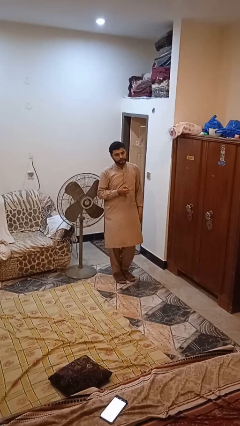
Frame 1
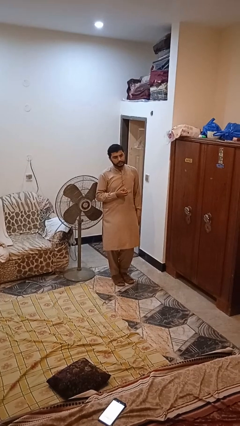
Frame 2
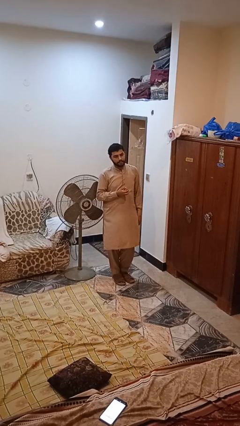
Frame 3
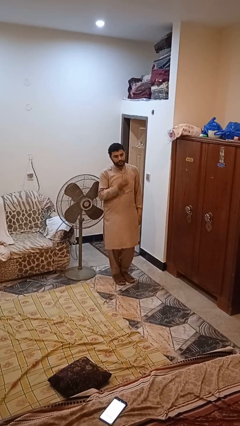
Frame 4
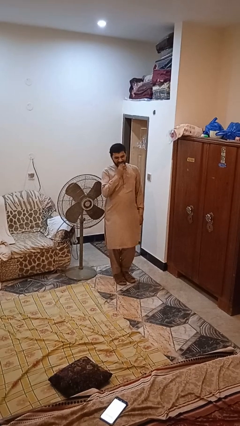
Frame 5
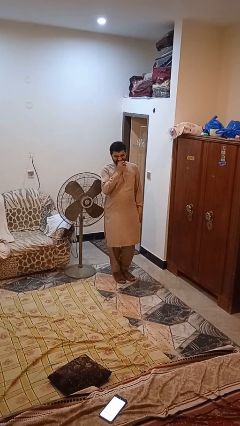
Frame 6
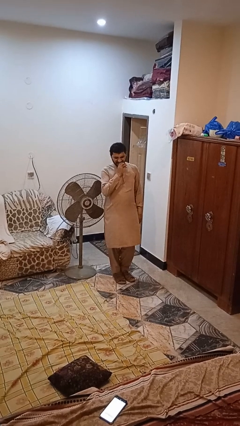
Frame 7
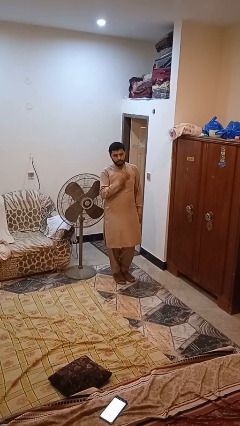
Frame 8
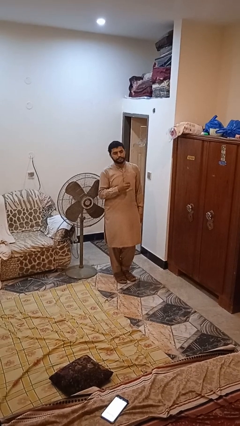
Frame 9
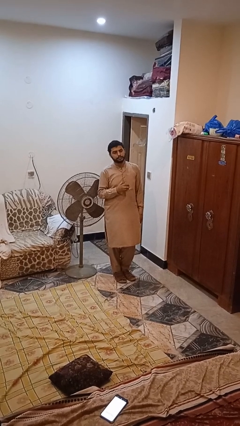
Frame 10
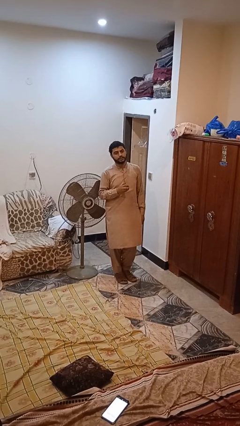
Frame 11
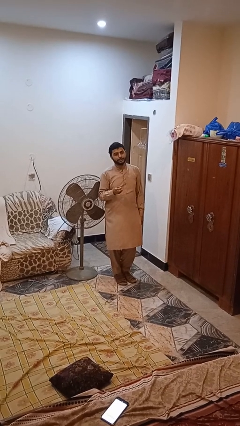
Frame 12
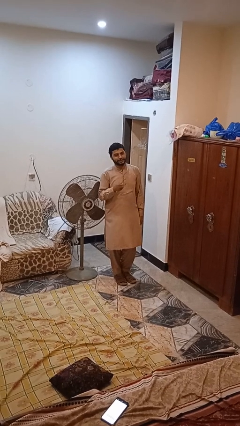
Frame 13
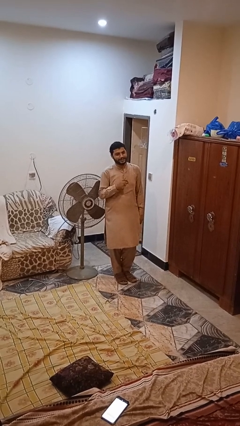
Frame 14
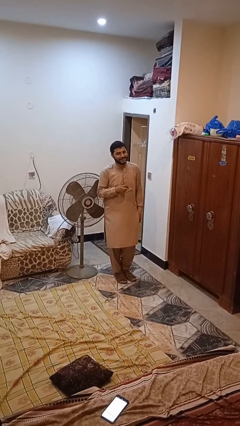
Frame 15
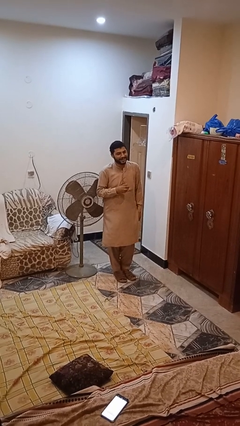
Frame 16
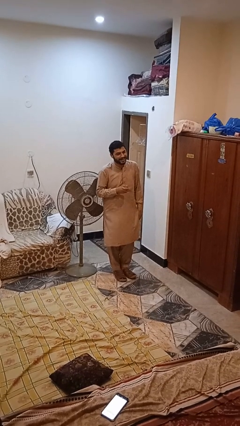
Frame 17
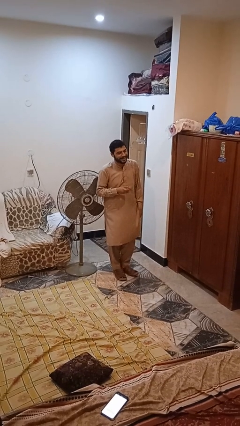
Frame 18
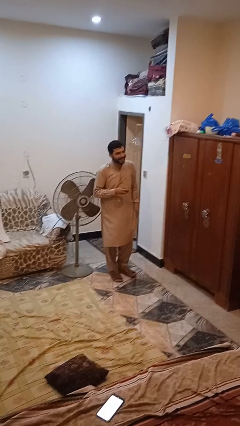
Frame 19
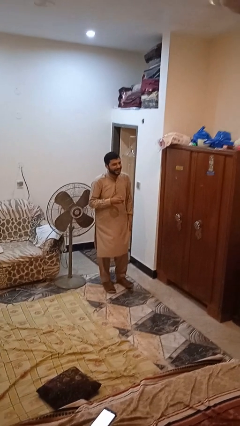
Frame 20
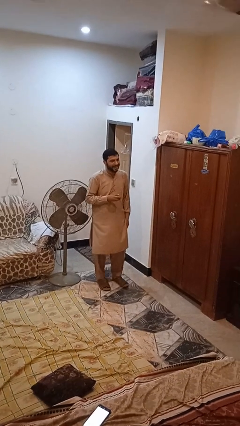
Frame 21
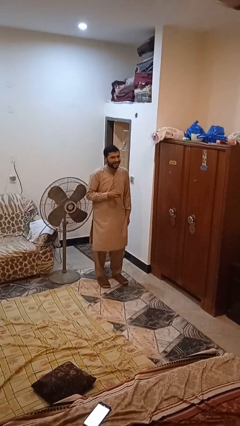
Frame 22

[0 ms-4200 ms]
person eats apple

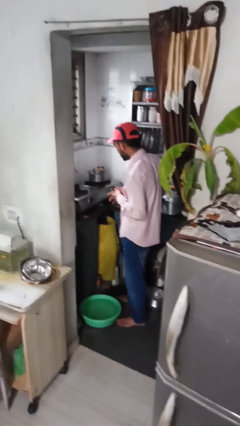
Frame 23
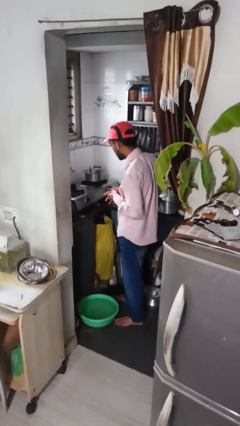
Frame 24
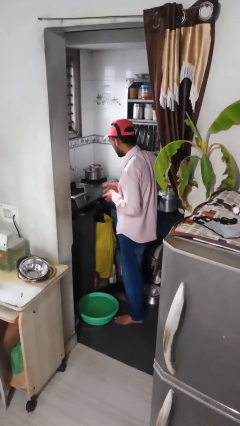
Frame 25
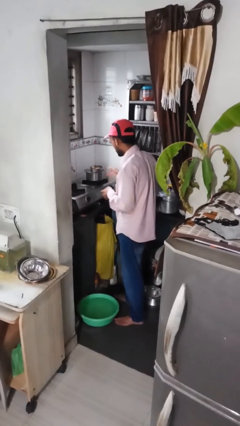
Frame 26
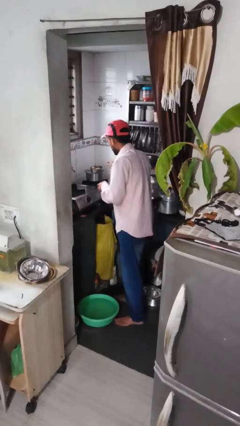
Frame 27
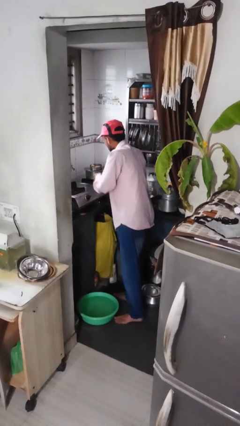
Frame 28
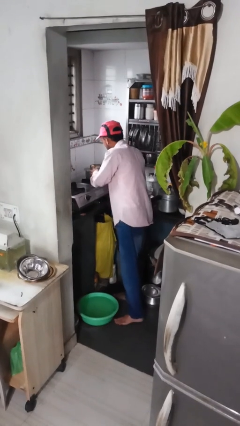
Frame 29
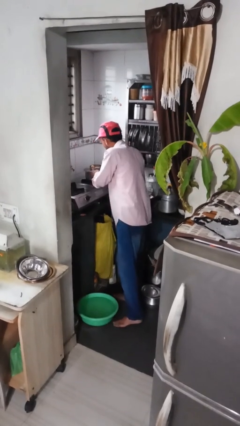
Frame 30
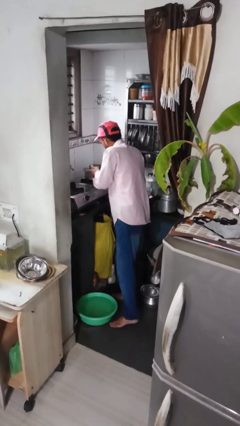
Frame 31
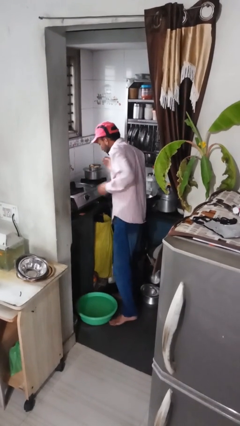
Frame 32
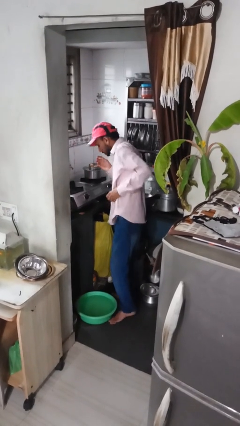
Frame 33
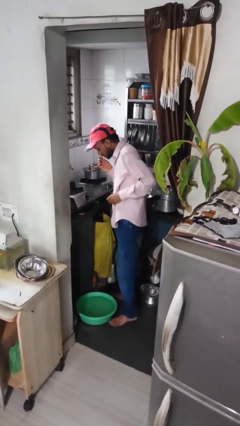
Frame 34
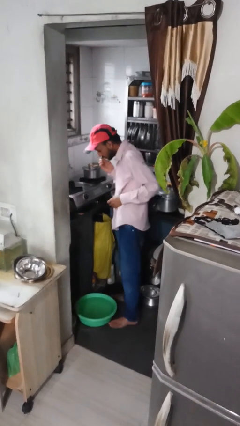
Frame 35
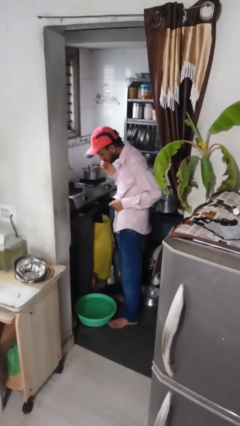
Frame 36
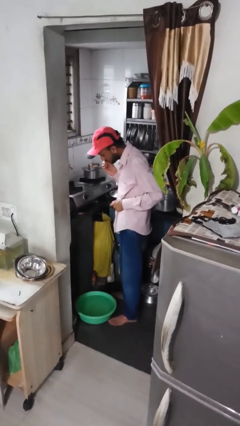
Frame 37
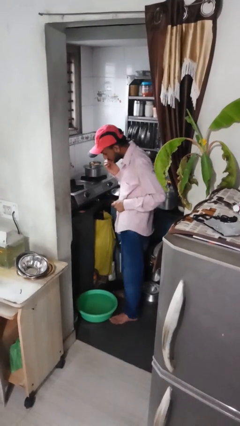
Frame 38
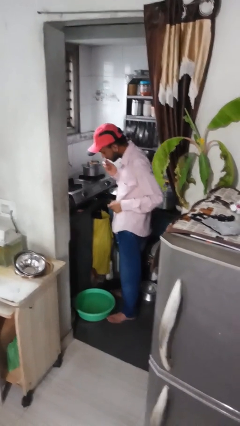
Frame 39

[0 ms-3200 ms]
person burns hand

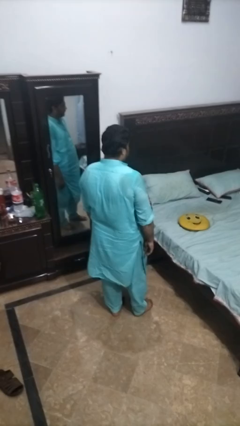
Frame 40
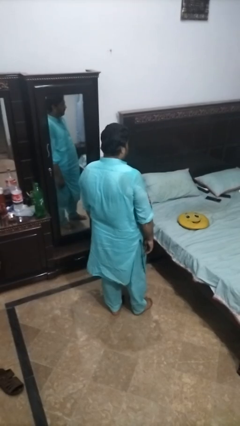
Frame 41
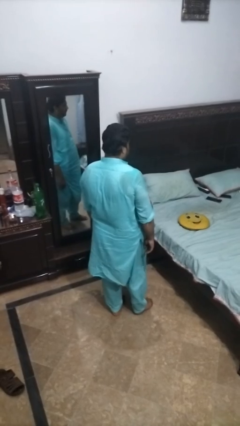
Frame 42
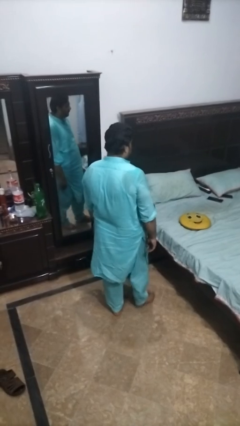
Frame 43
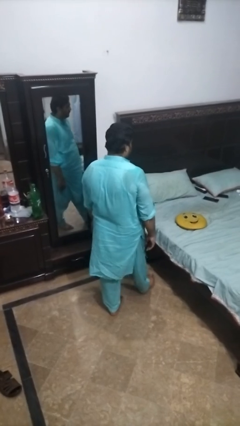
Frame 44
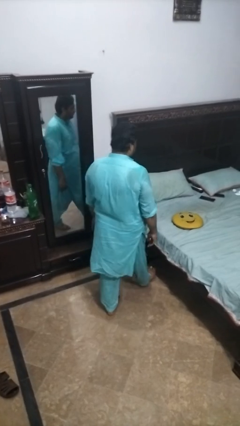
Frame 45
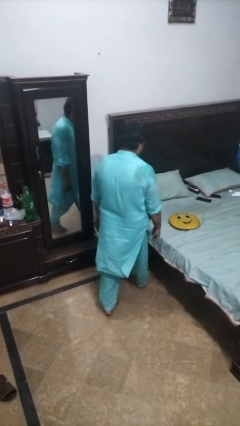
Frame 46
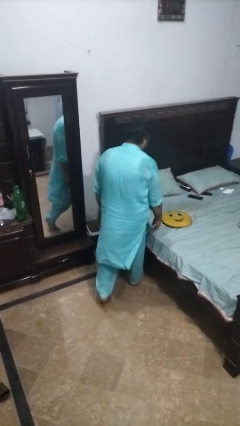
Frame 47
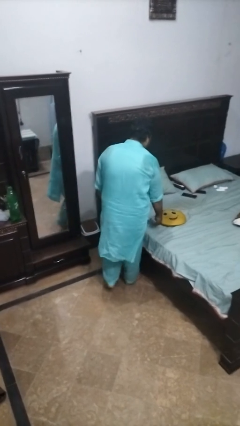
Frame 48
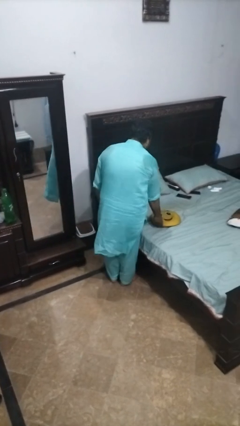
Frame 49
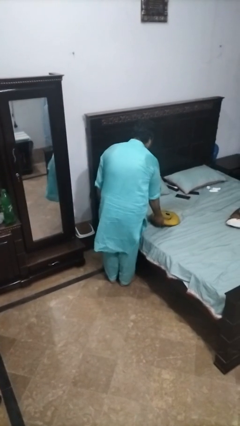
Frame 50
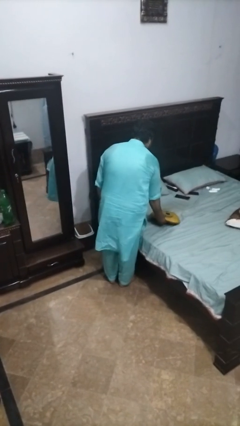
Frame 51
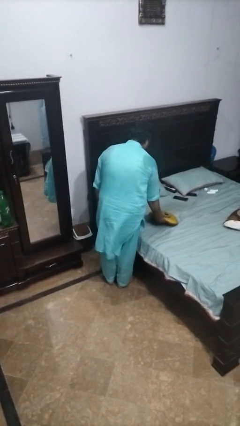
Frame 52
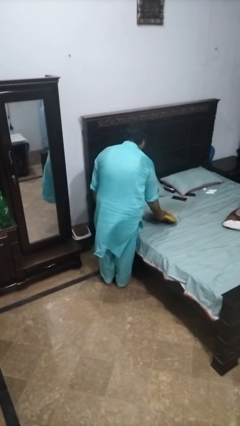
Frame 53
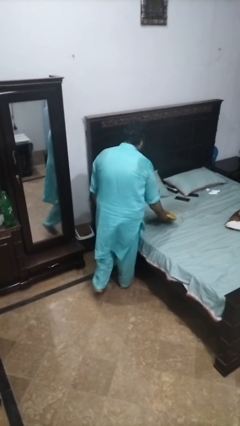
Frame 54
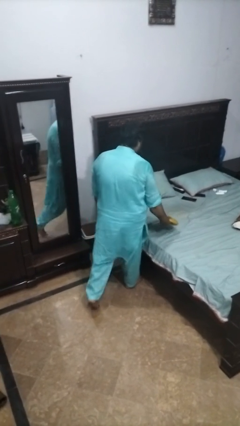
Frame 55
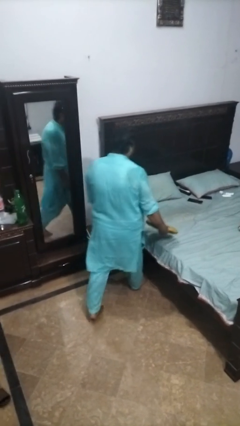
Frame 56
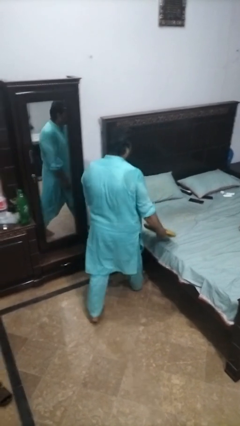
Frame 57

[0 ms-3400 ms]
person picks up object from bed

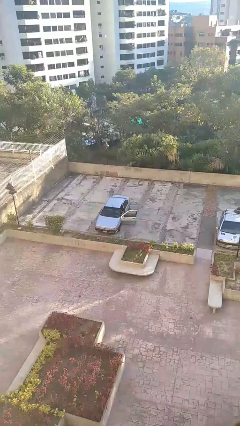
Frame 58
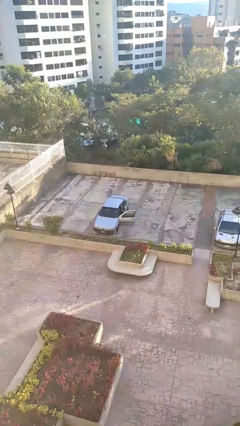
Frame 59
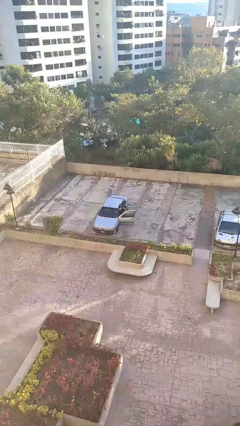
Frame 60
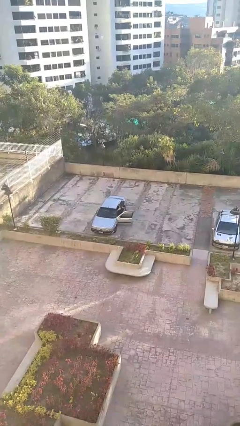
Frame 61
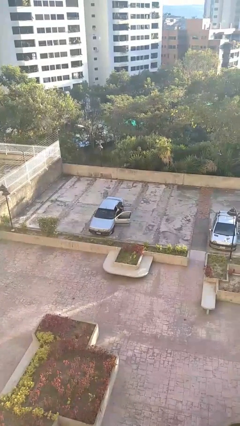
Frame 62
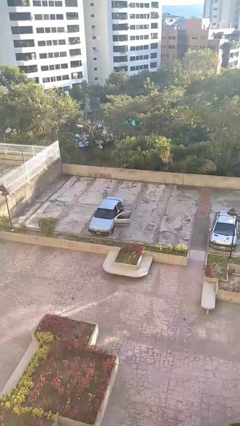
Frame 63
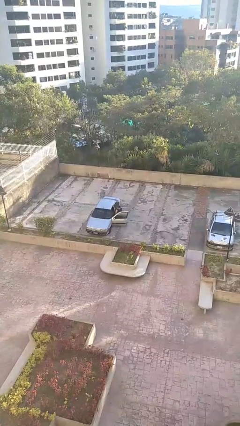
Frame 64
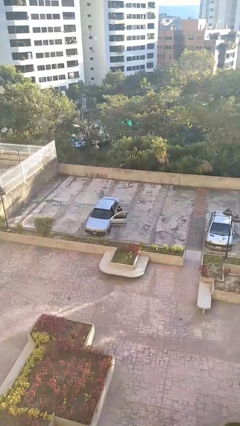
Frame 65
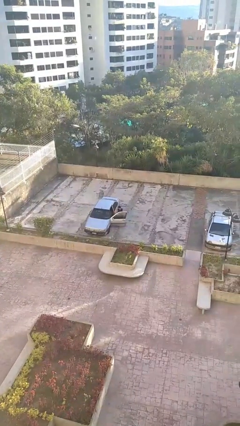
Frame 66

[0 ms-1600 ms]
person exits car

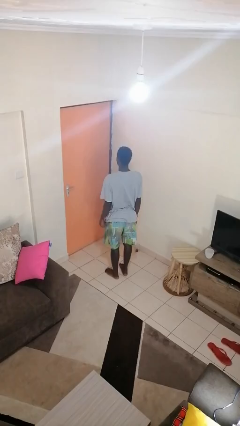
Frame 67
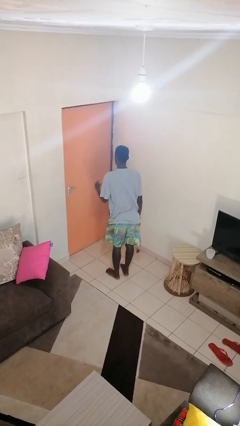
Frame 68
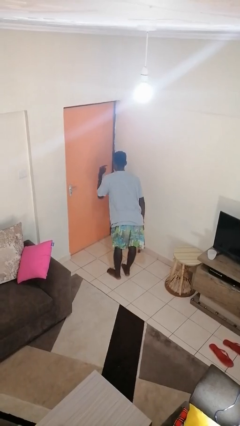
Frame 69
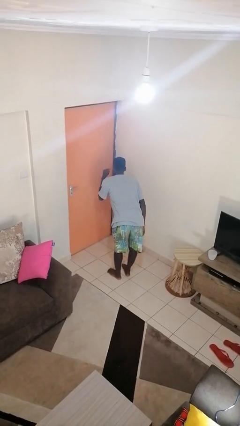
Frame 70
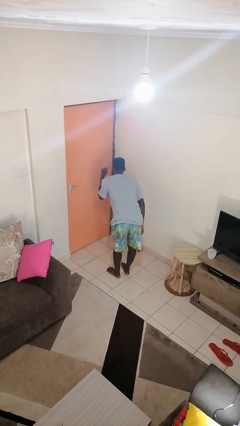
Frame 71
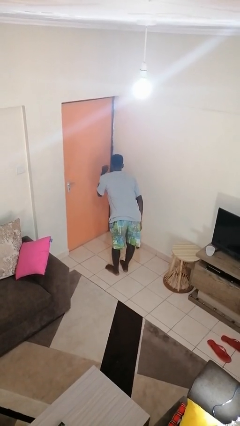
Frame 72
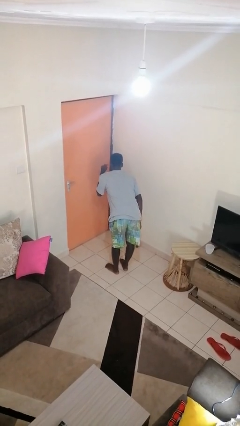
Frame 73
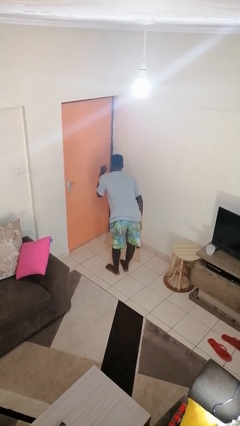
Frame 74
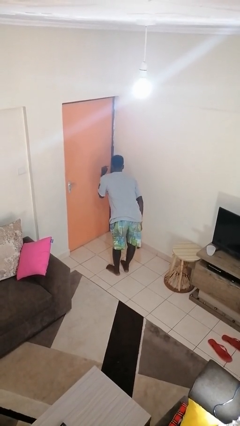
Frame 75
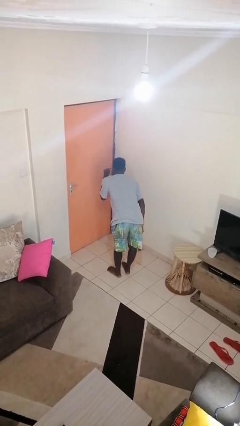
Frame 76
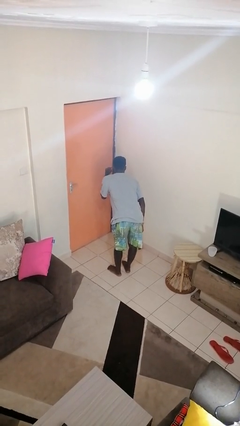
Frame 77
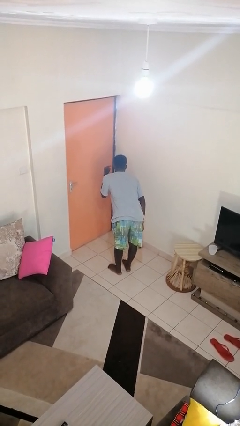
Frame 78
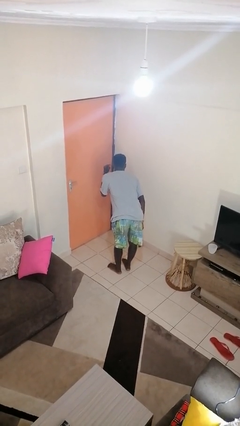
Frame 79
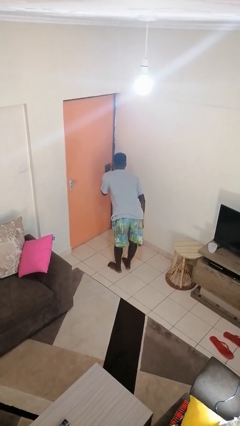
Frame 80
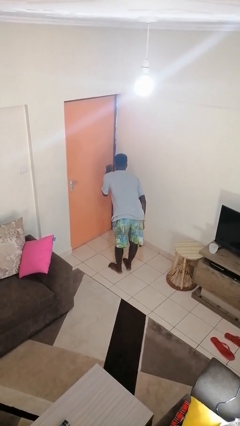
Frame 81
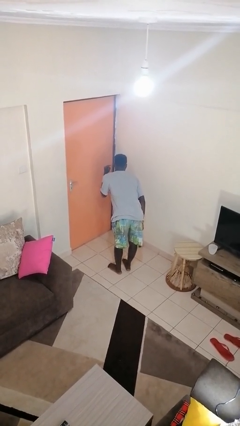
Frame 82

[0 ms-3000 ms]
person gestures listen closely

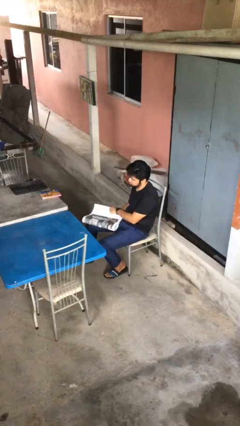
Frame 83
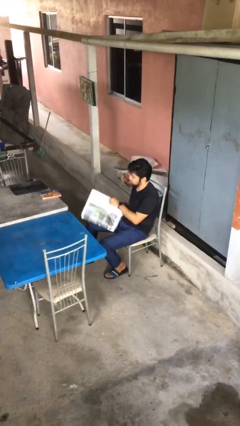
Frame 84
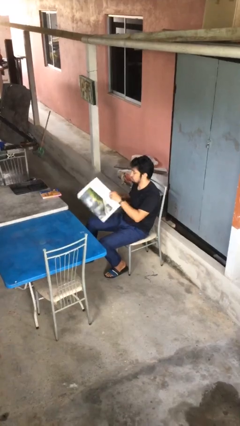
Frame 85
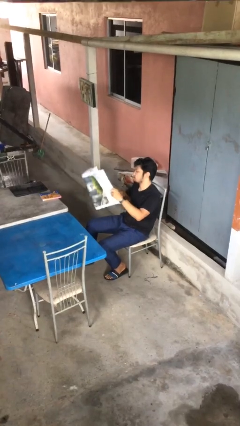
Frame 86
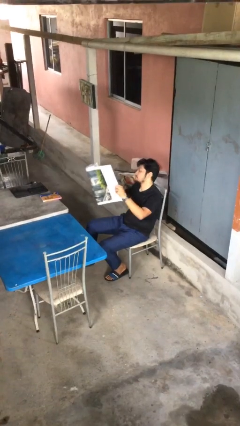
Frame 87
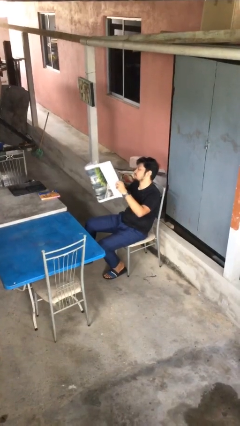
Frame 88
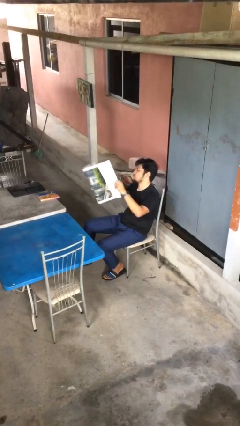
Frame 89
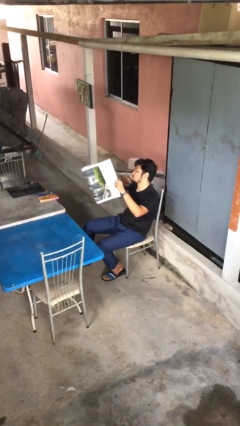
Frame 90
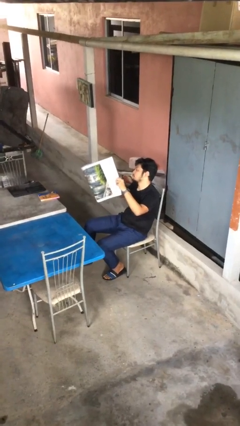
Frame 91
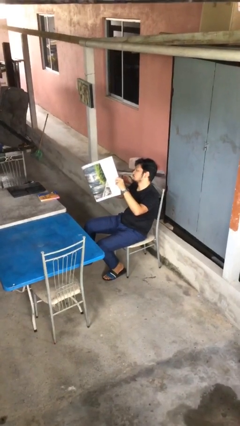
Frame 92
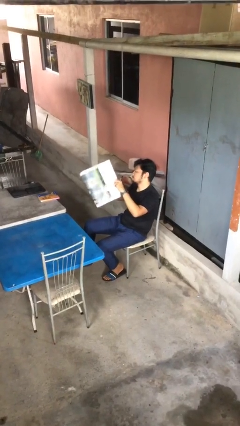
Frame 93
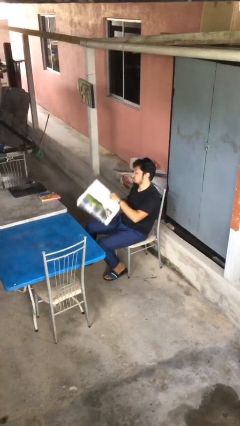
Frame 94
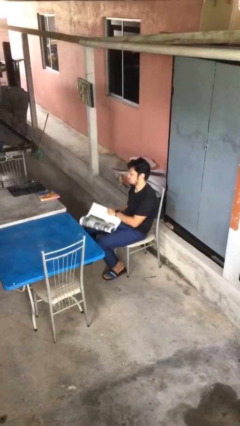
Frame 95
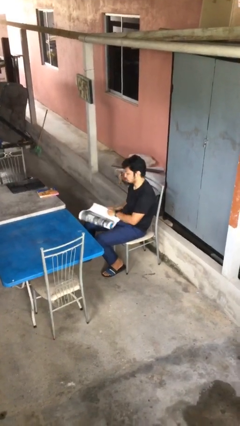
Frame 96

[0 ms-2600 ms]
person reads newspaper
